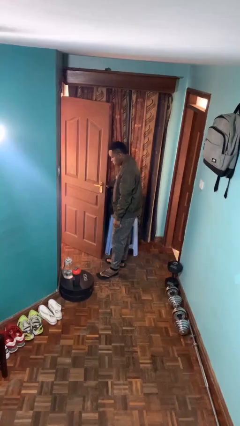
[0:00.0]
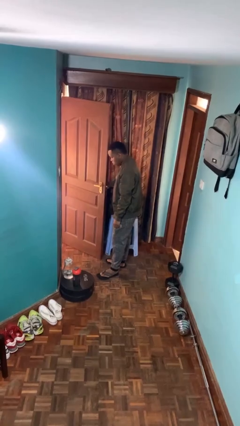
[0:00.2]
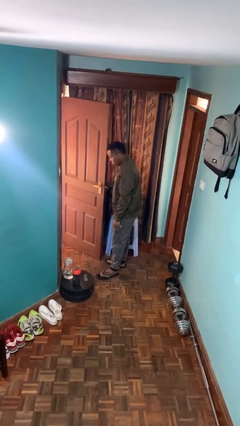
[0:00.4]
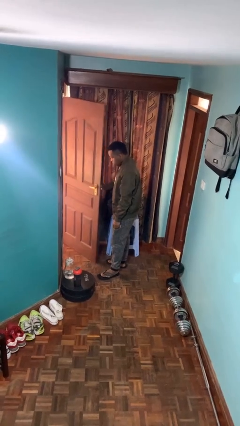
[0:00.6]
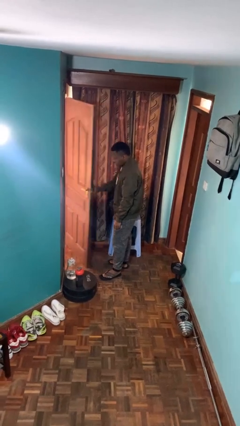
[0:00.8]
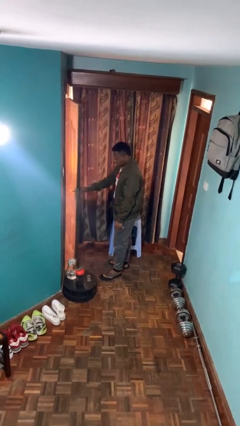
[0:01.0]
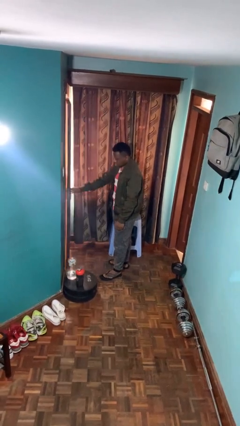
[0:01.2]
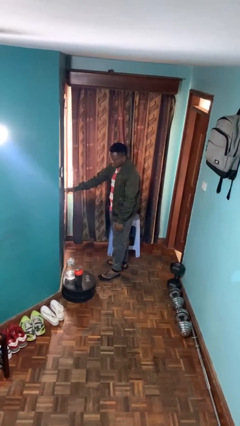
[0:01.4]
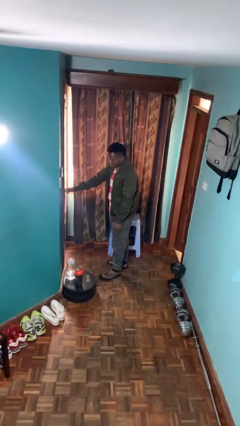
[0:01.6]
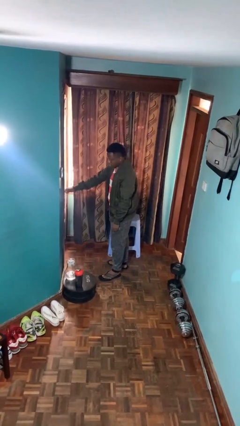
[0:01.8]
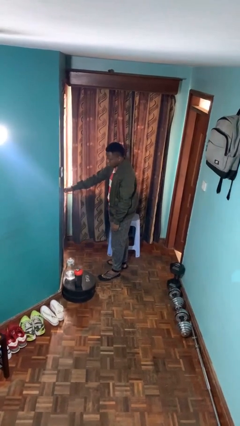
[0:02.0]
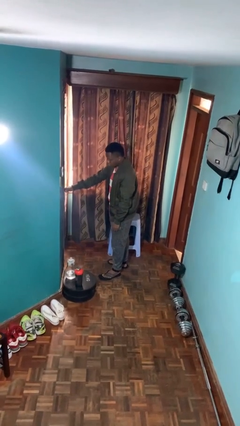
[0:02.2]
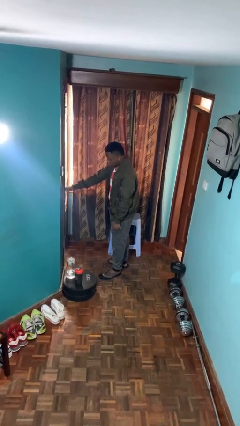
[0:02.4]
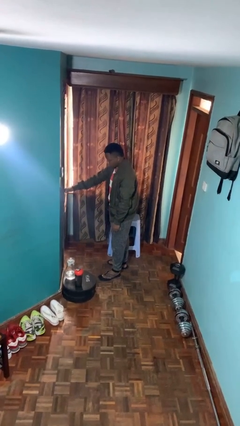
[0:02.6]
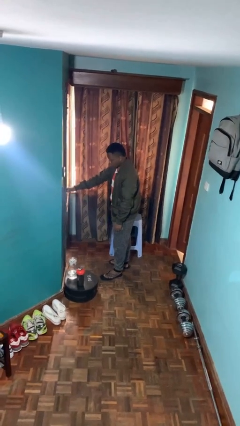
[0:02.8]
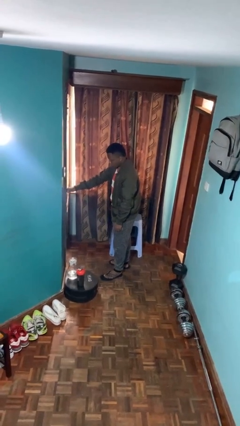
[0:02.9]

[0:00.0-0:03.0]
person closes facility door

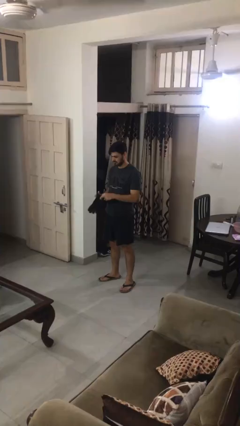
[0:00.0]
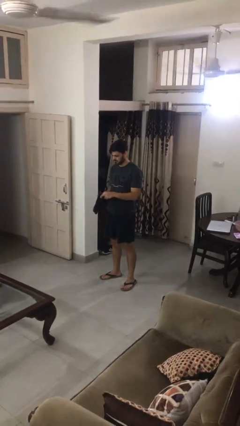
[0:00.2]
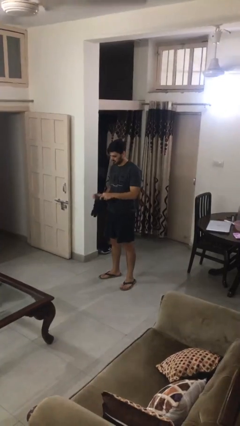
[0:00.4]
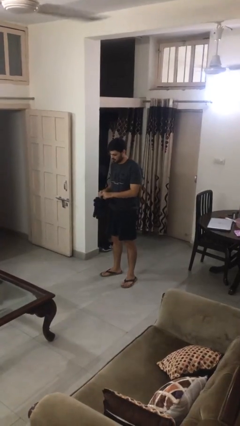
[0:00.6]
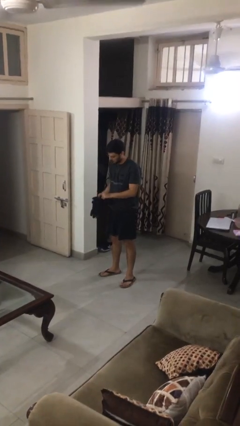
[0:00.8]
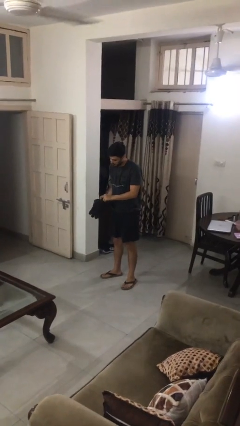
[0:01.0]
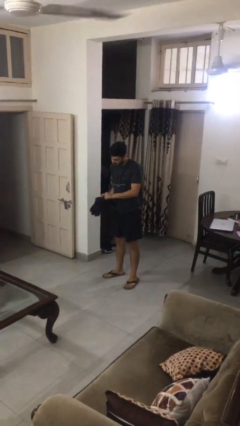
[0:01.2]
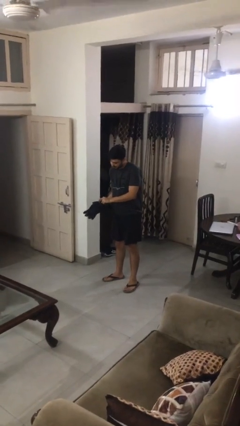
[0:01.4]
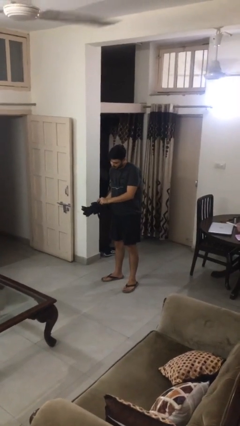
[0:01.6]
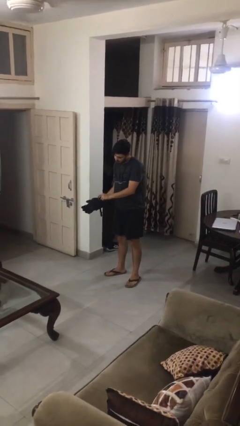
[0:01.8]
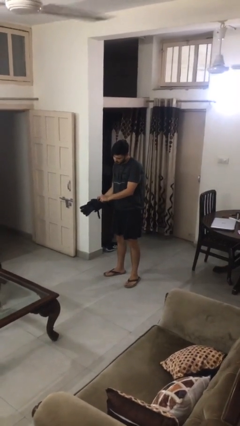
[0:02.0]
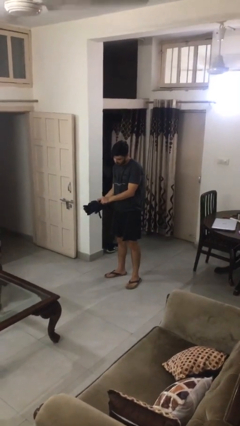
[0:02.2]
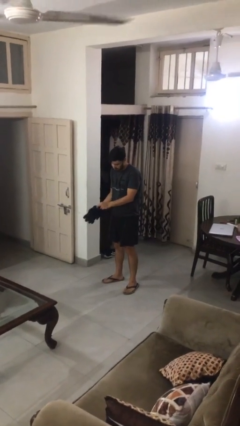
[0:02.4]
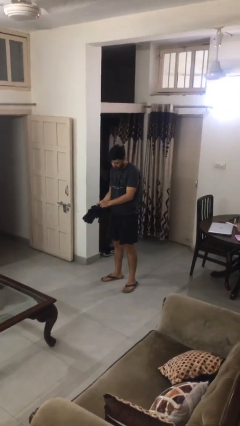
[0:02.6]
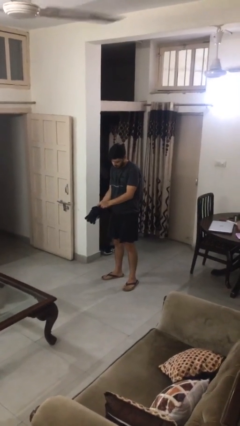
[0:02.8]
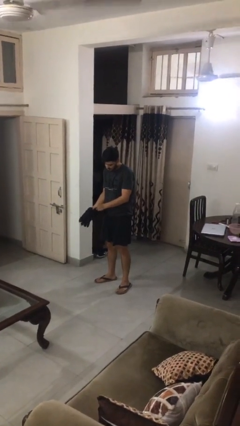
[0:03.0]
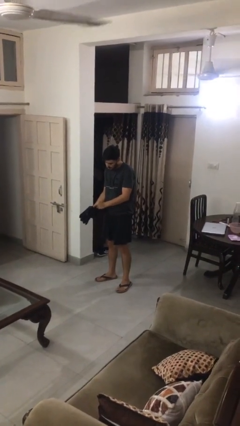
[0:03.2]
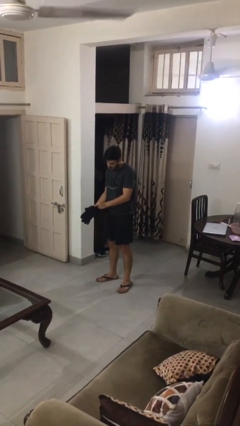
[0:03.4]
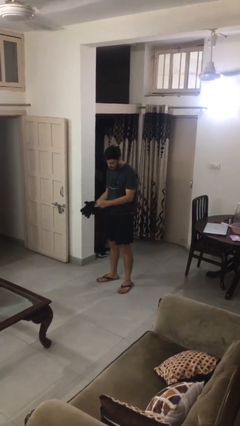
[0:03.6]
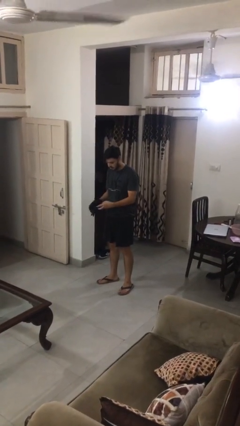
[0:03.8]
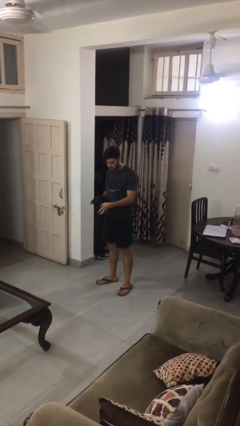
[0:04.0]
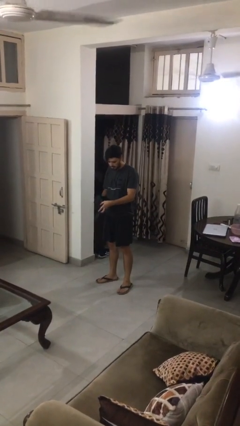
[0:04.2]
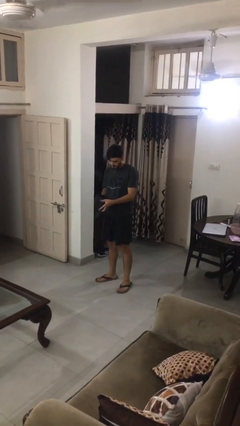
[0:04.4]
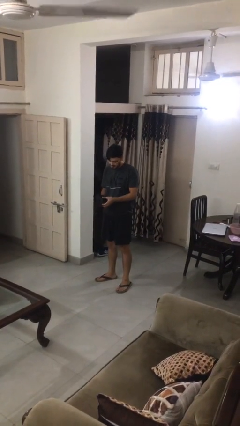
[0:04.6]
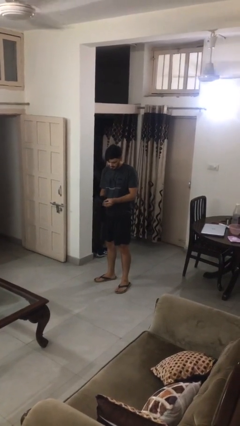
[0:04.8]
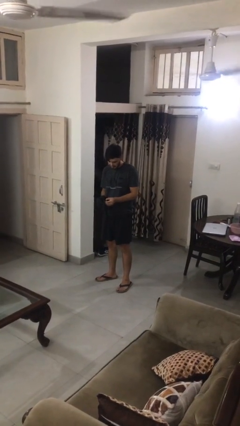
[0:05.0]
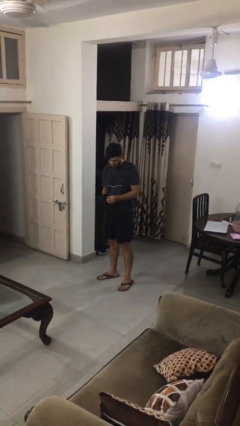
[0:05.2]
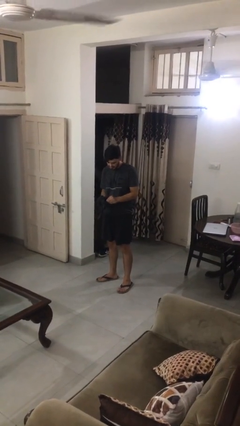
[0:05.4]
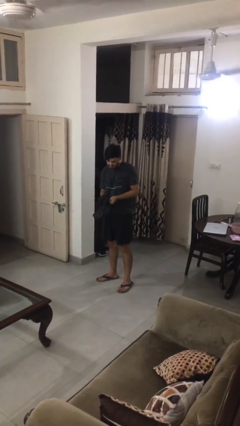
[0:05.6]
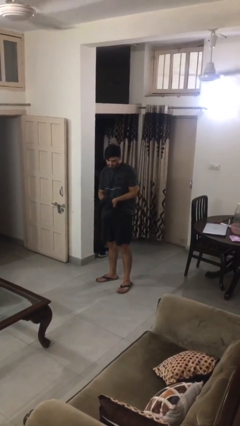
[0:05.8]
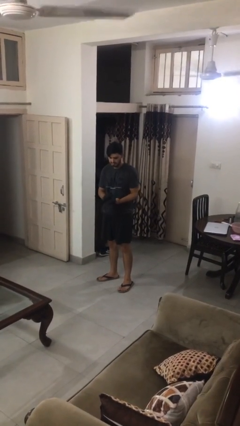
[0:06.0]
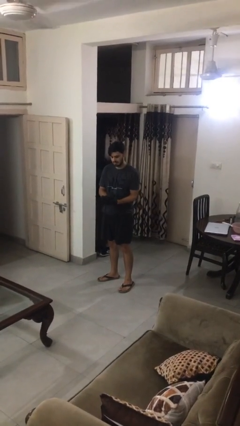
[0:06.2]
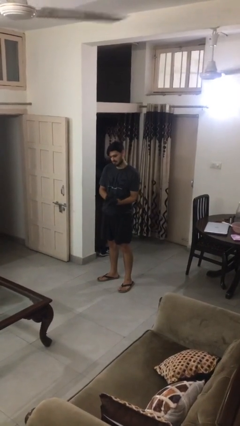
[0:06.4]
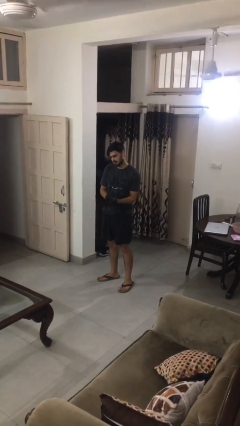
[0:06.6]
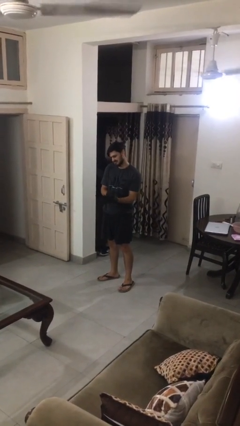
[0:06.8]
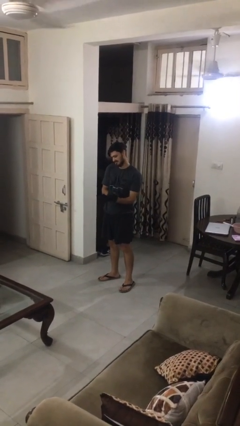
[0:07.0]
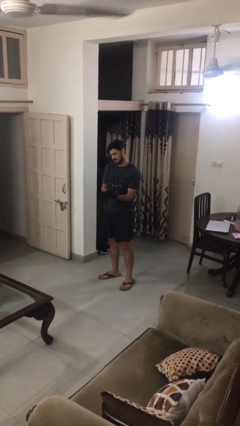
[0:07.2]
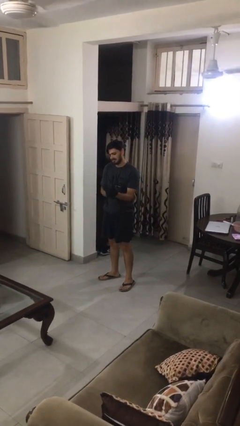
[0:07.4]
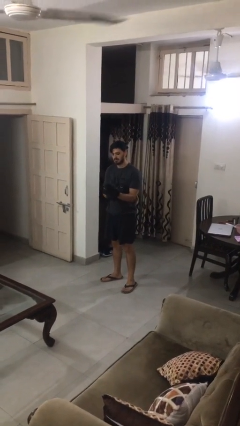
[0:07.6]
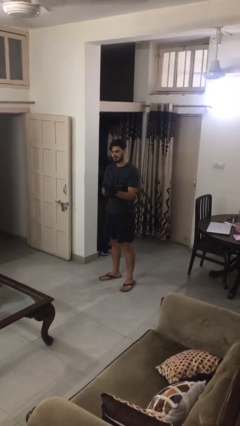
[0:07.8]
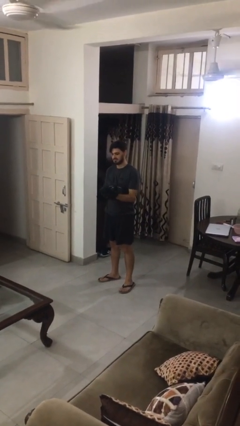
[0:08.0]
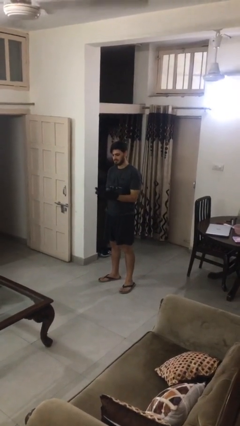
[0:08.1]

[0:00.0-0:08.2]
person puts on gloves

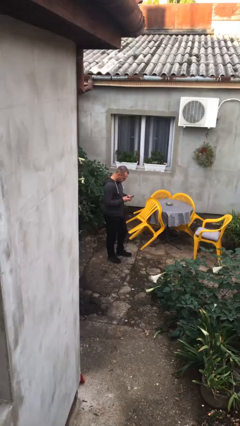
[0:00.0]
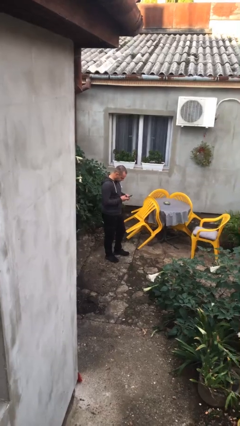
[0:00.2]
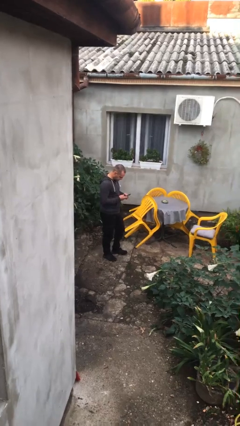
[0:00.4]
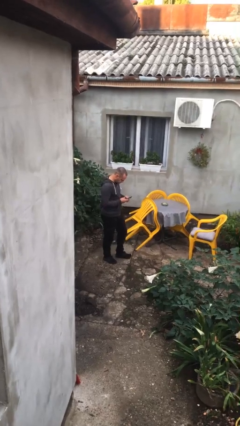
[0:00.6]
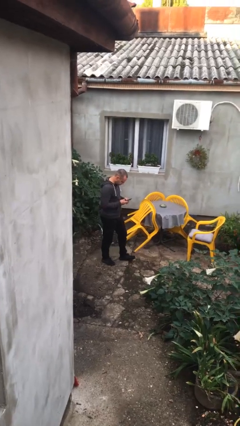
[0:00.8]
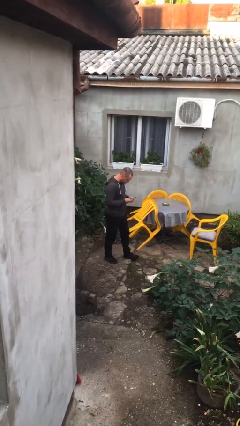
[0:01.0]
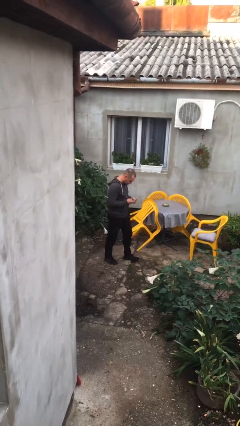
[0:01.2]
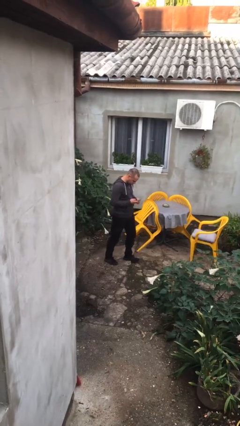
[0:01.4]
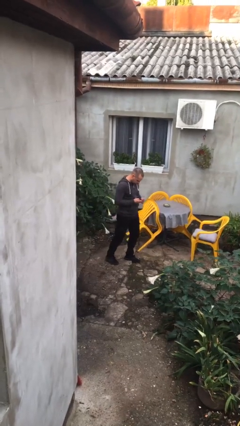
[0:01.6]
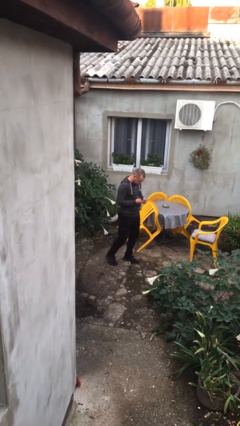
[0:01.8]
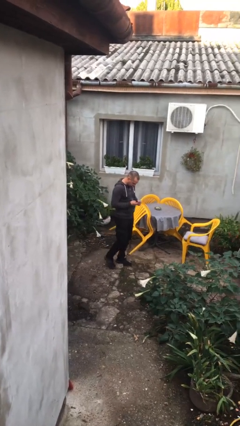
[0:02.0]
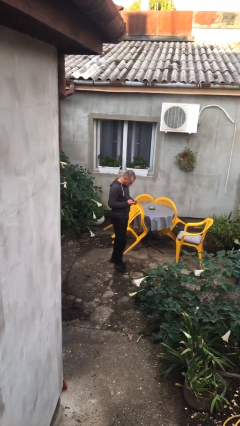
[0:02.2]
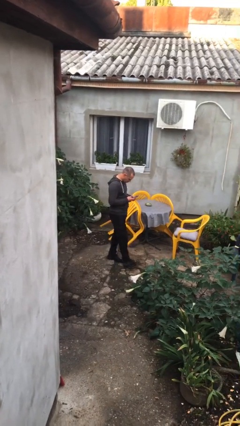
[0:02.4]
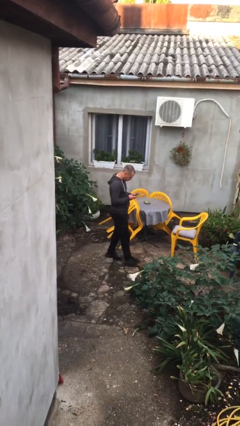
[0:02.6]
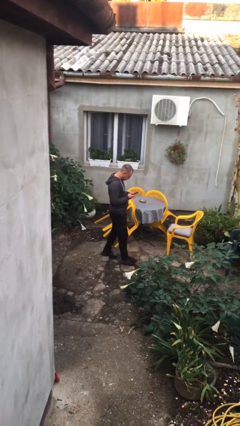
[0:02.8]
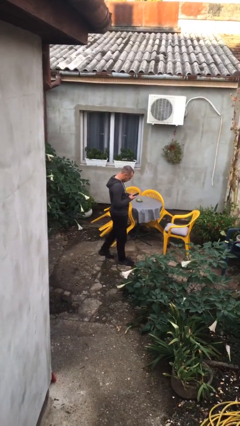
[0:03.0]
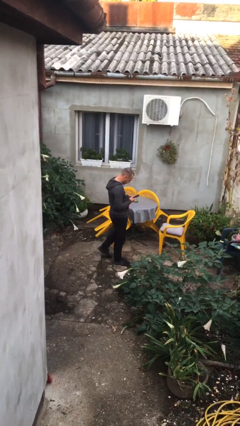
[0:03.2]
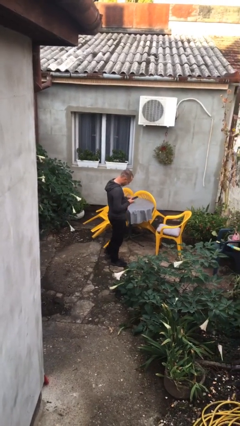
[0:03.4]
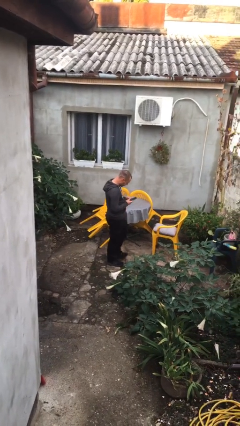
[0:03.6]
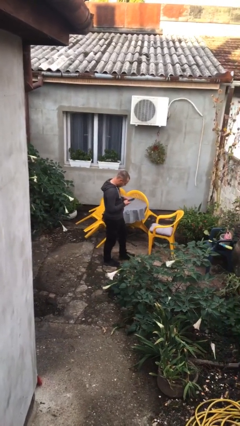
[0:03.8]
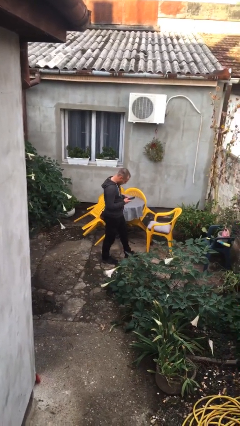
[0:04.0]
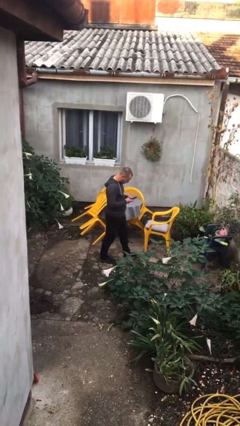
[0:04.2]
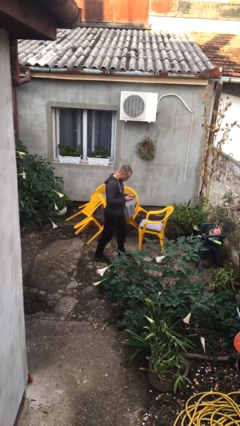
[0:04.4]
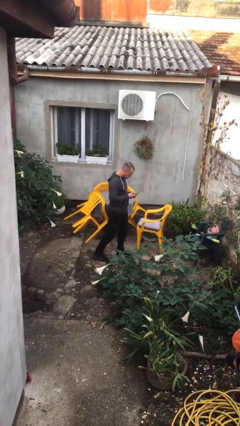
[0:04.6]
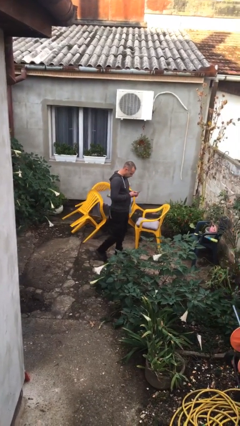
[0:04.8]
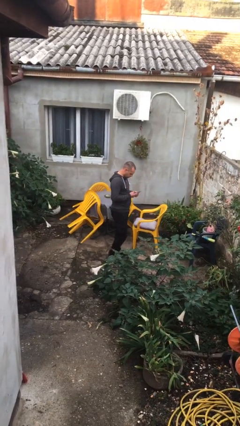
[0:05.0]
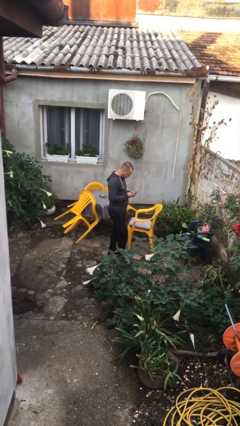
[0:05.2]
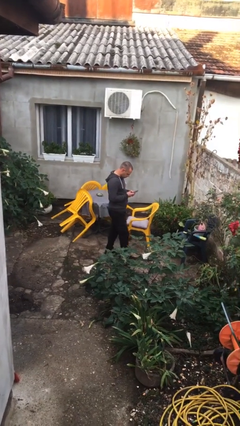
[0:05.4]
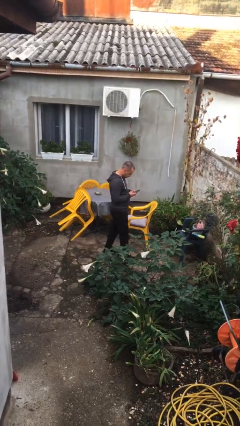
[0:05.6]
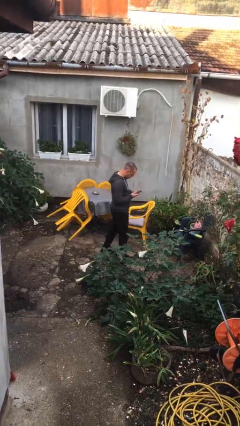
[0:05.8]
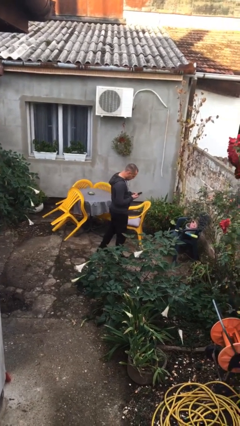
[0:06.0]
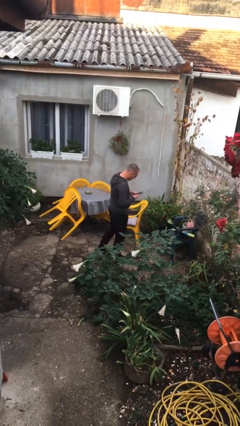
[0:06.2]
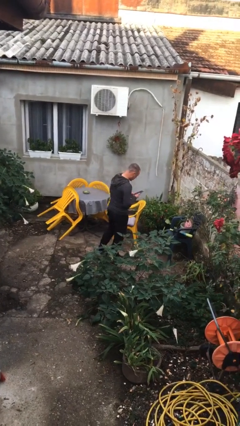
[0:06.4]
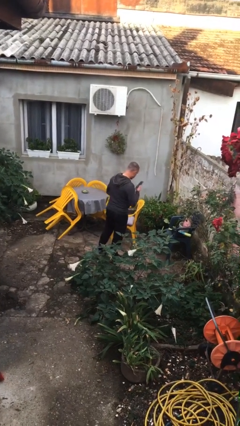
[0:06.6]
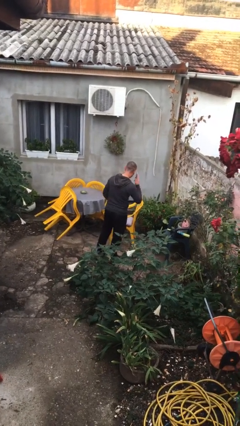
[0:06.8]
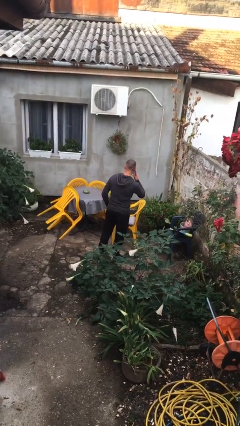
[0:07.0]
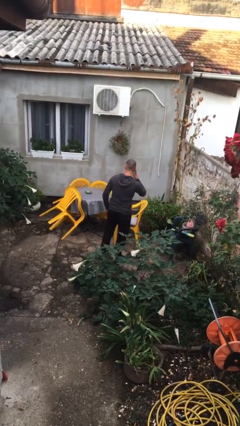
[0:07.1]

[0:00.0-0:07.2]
person texts on phone
